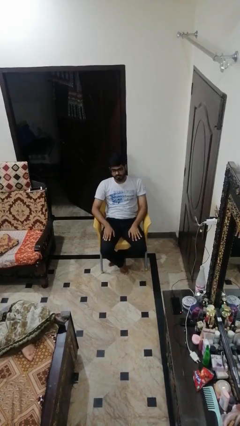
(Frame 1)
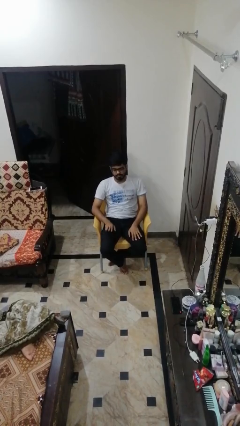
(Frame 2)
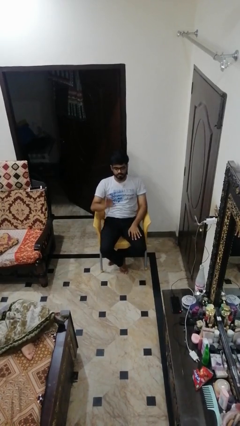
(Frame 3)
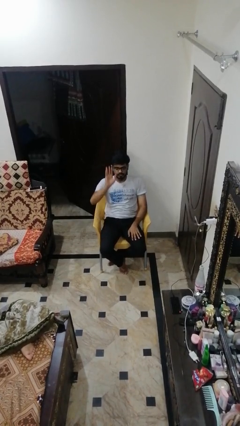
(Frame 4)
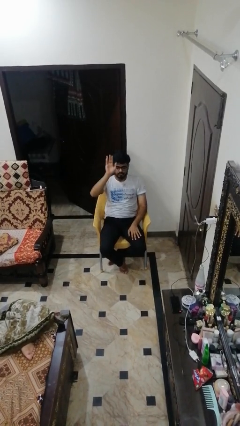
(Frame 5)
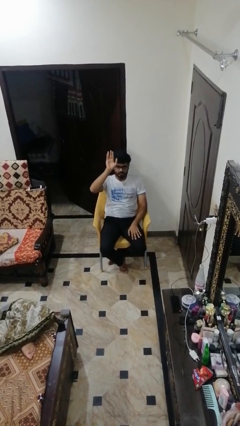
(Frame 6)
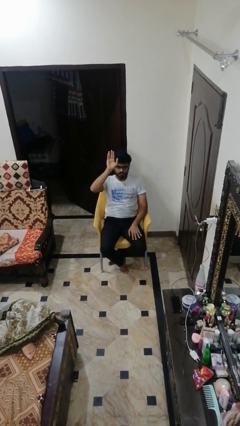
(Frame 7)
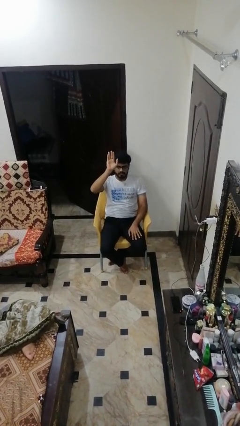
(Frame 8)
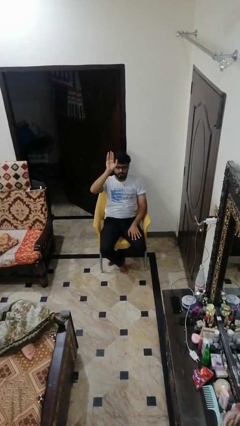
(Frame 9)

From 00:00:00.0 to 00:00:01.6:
person gestures raise hand

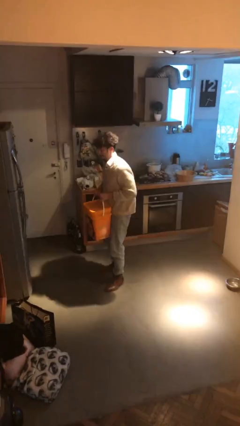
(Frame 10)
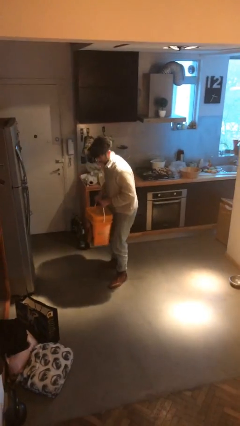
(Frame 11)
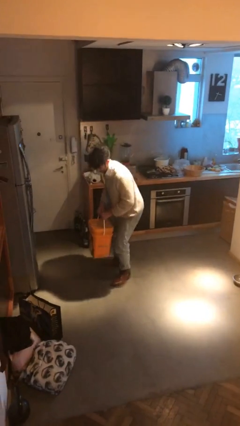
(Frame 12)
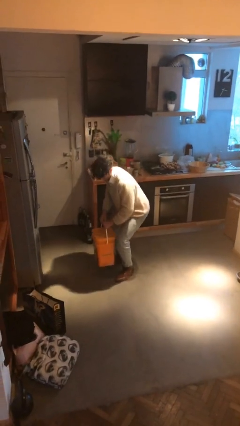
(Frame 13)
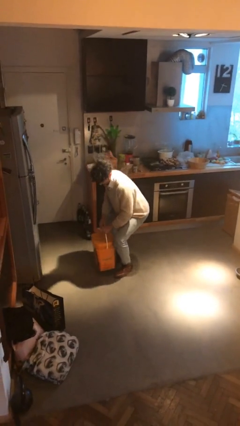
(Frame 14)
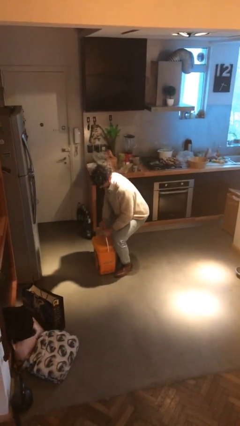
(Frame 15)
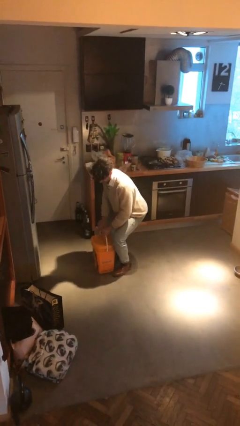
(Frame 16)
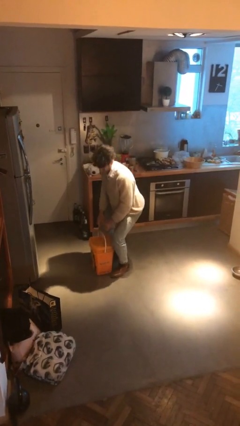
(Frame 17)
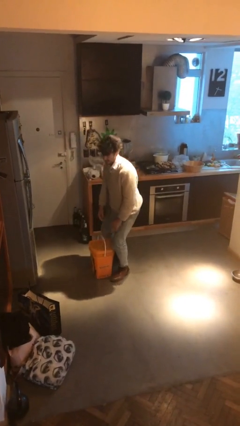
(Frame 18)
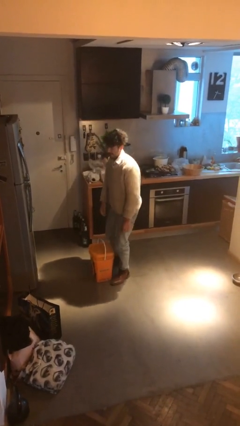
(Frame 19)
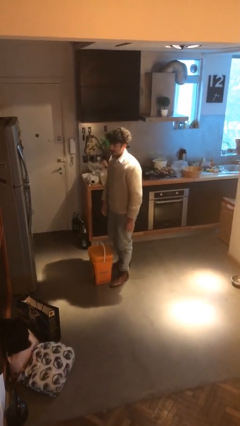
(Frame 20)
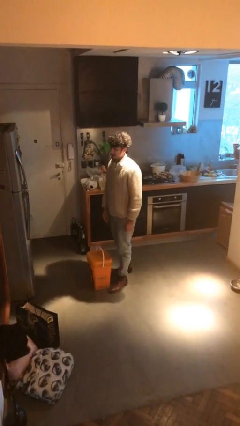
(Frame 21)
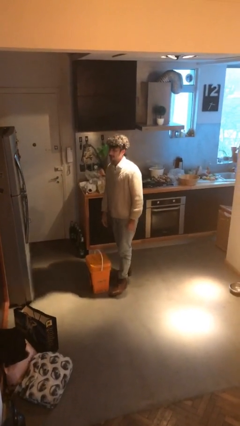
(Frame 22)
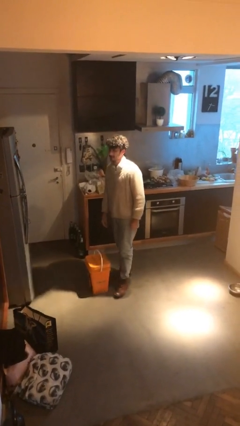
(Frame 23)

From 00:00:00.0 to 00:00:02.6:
person puts down object on floor

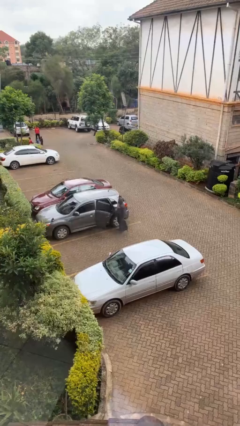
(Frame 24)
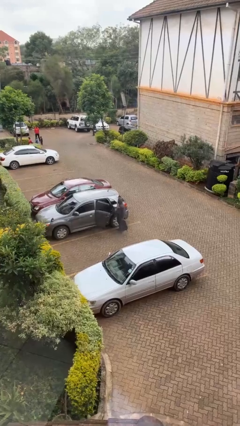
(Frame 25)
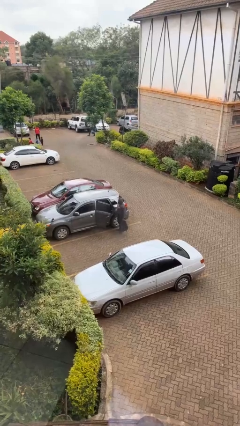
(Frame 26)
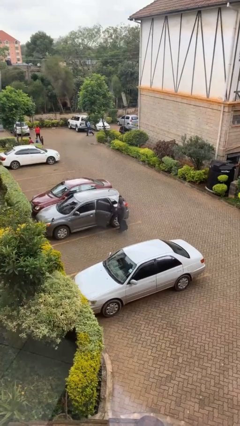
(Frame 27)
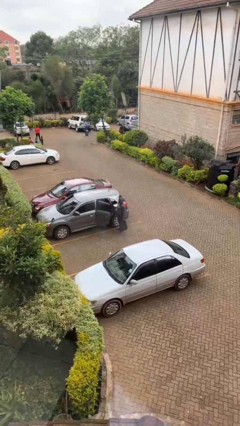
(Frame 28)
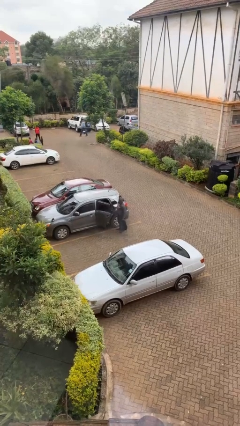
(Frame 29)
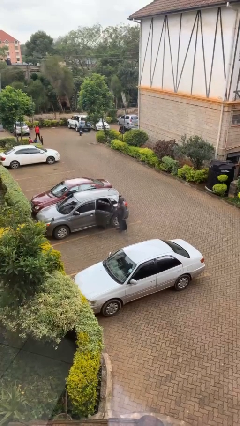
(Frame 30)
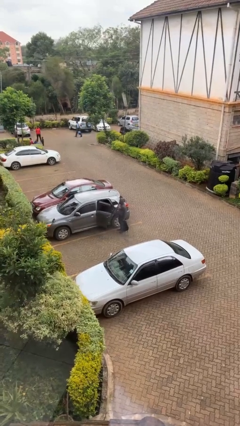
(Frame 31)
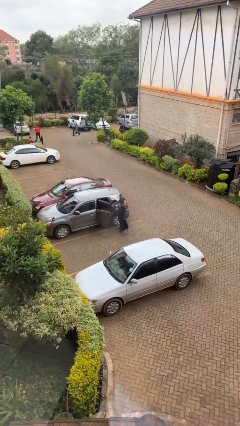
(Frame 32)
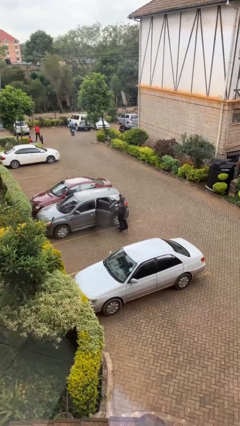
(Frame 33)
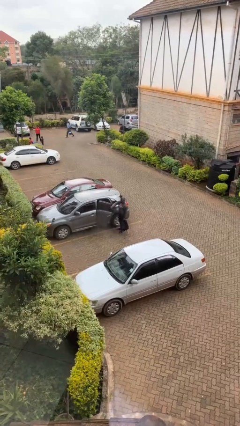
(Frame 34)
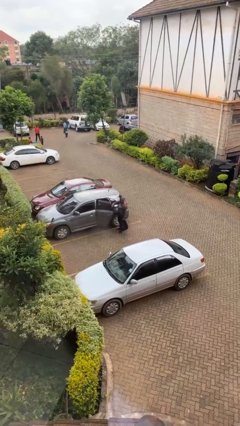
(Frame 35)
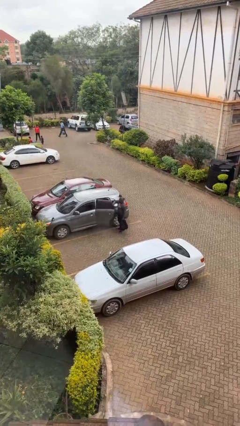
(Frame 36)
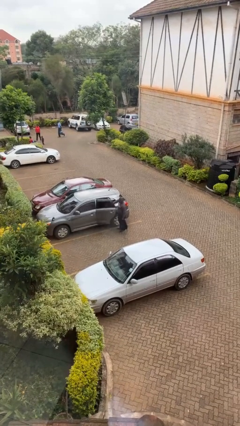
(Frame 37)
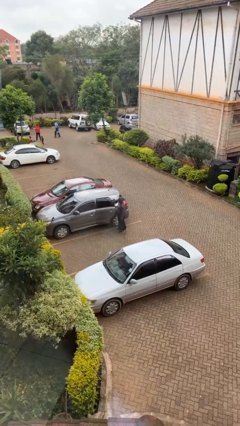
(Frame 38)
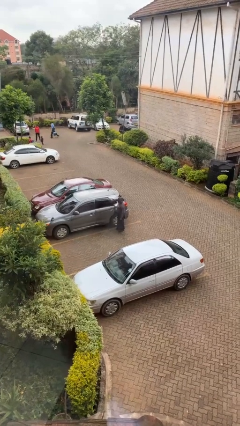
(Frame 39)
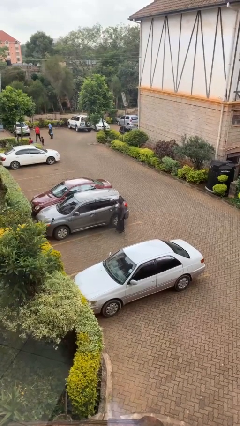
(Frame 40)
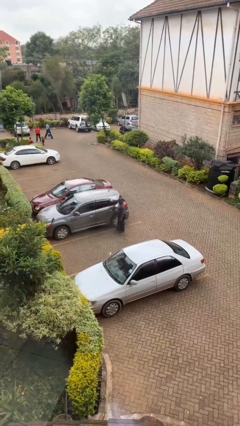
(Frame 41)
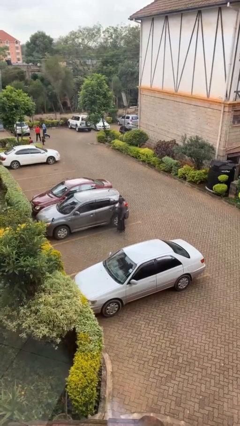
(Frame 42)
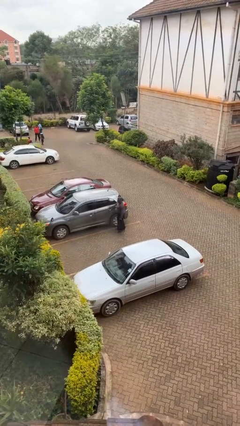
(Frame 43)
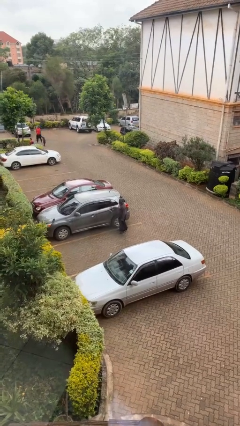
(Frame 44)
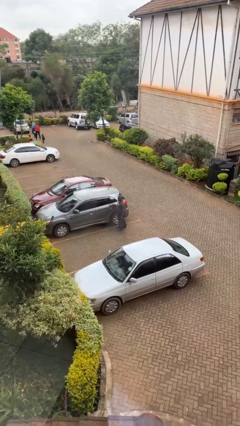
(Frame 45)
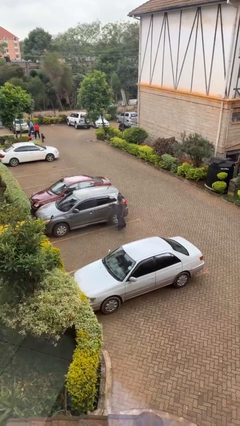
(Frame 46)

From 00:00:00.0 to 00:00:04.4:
person closes car door

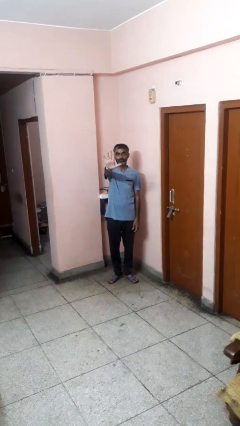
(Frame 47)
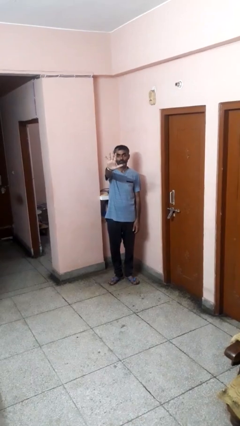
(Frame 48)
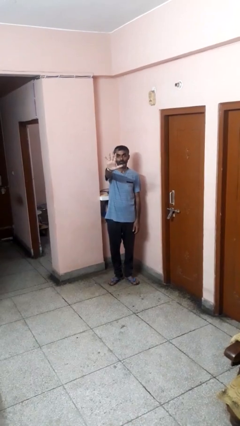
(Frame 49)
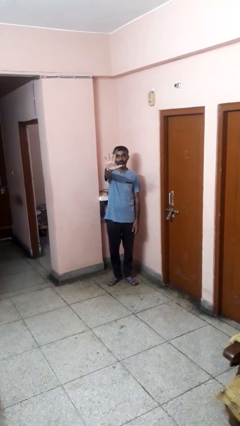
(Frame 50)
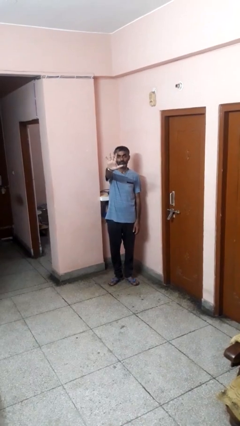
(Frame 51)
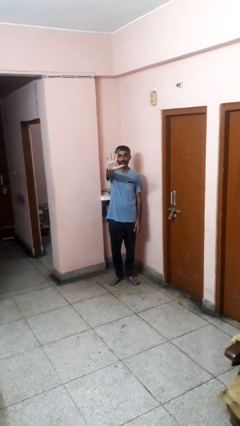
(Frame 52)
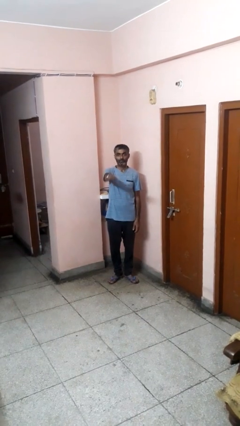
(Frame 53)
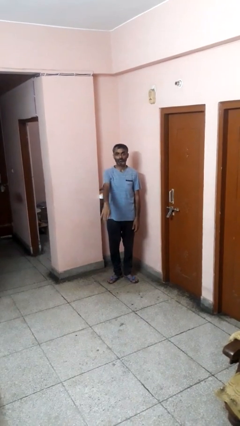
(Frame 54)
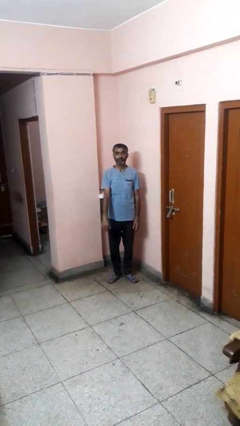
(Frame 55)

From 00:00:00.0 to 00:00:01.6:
person gestures number five

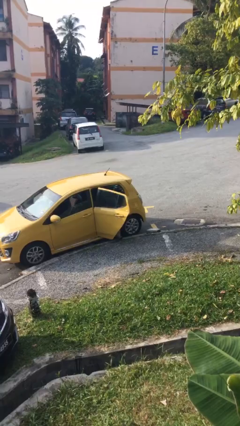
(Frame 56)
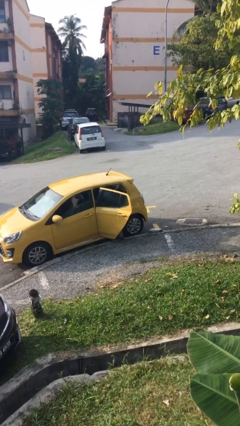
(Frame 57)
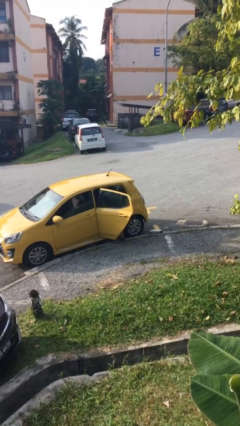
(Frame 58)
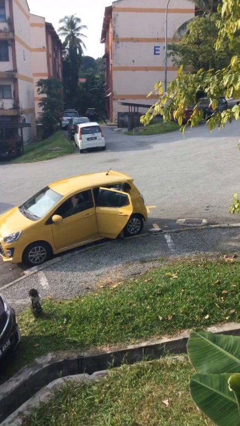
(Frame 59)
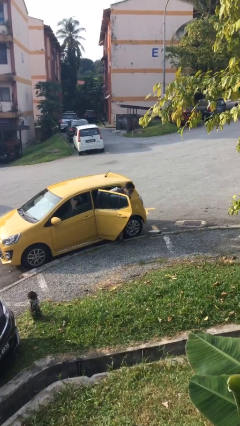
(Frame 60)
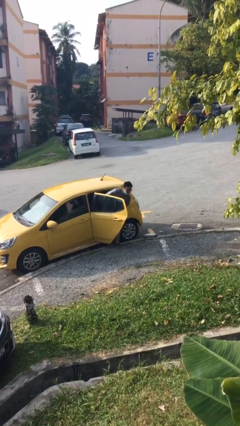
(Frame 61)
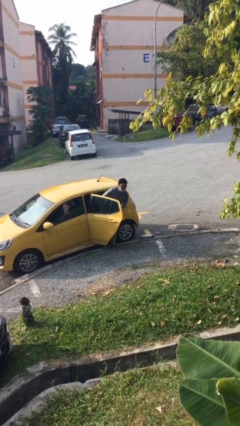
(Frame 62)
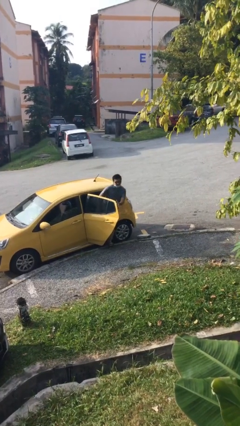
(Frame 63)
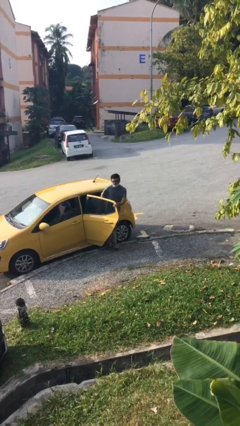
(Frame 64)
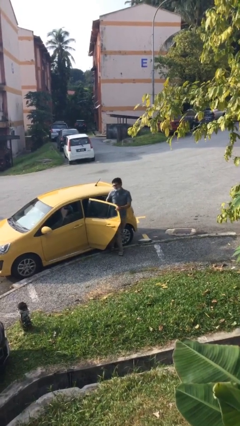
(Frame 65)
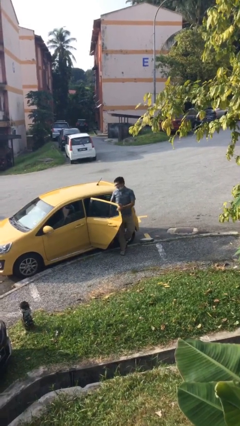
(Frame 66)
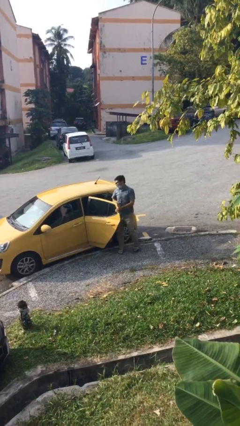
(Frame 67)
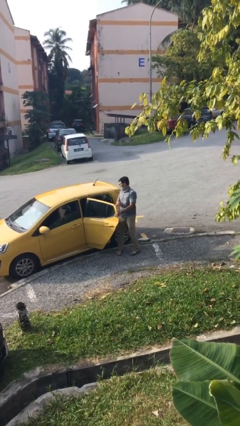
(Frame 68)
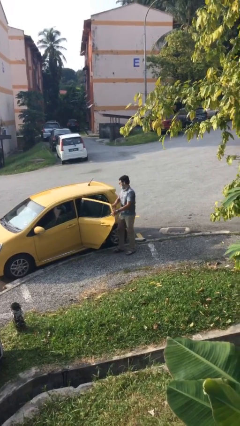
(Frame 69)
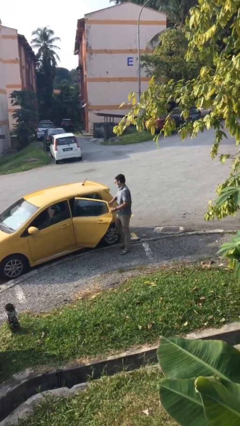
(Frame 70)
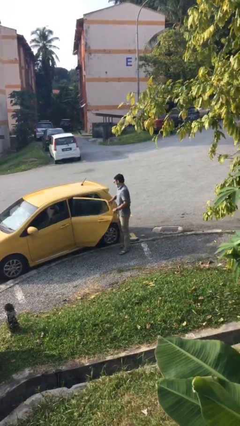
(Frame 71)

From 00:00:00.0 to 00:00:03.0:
person exits car

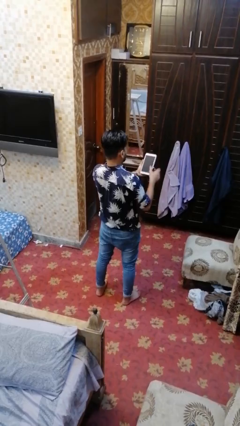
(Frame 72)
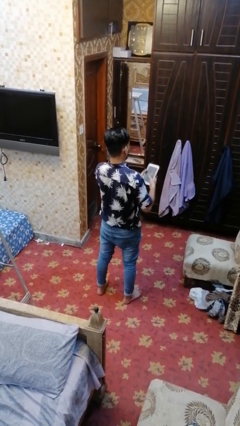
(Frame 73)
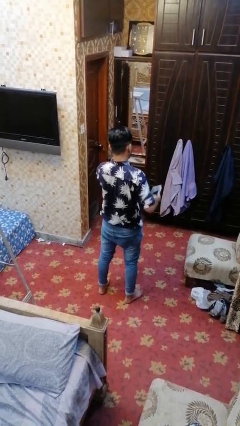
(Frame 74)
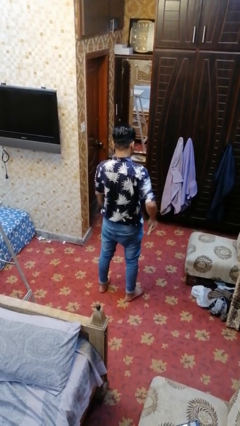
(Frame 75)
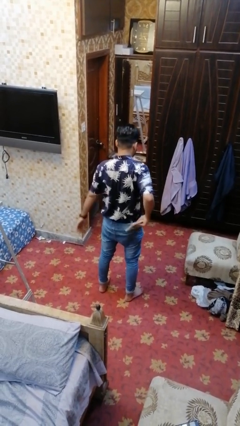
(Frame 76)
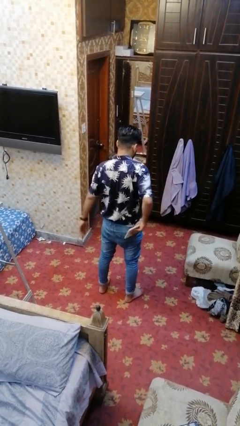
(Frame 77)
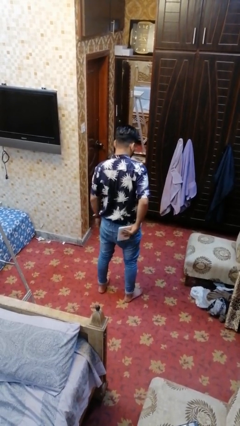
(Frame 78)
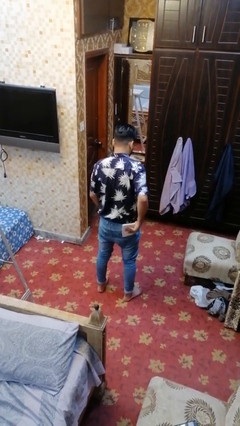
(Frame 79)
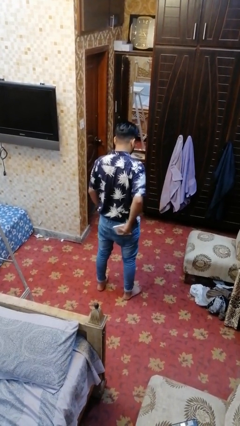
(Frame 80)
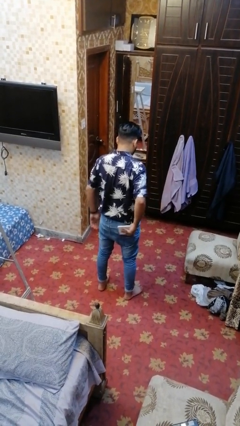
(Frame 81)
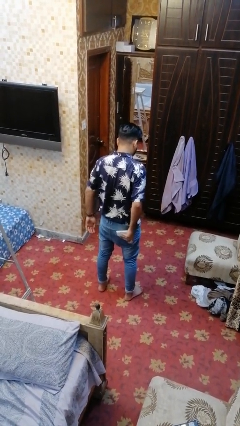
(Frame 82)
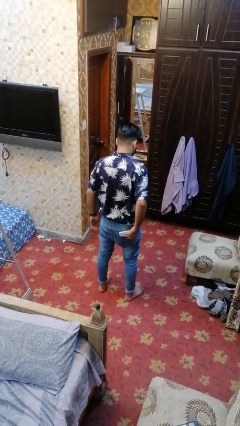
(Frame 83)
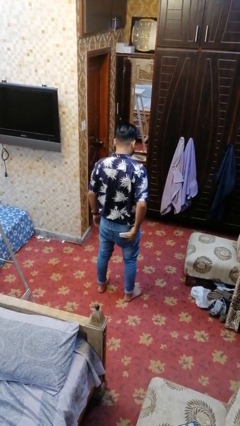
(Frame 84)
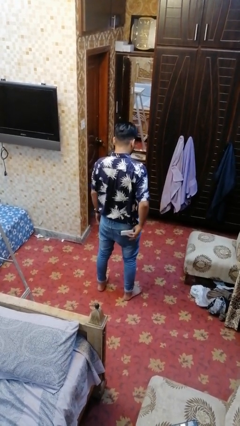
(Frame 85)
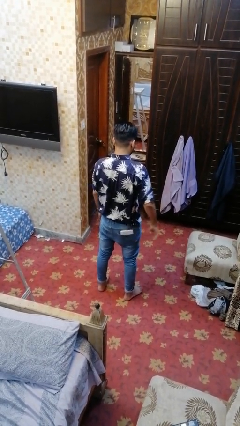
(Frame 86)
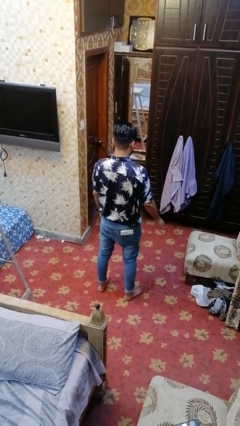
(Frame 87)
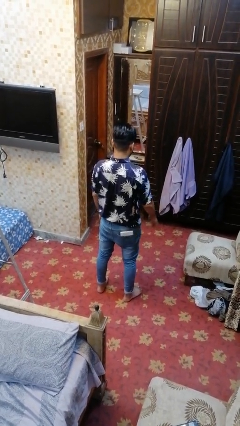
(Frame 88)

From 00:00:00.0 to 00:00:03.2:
person puts phone into pocket

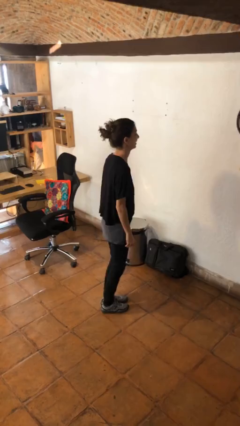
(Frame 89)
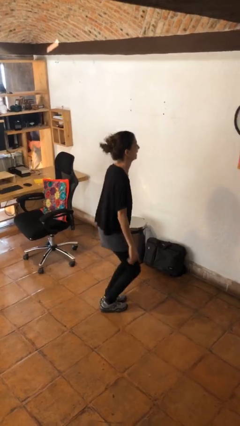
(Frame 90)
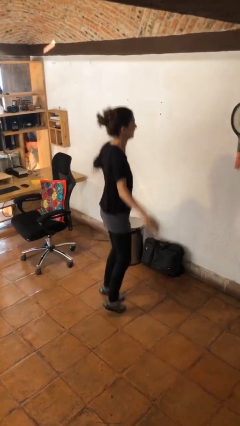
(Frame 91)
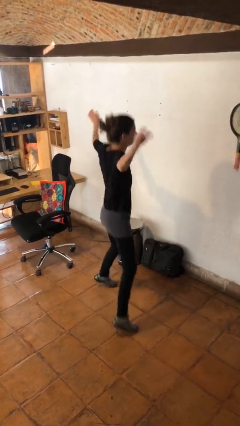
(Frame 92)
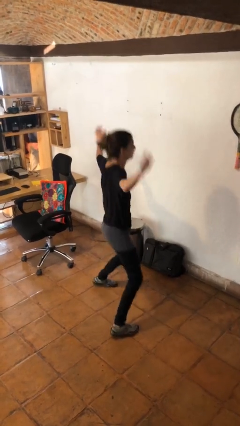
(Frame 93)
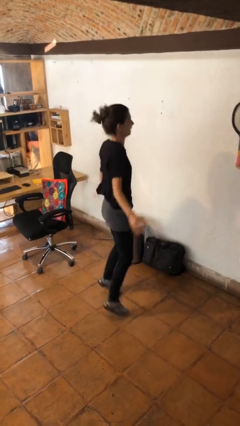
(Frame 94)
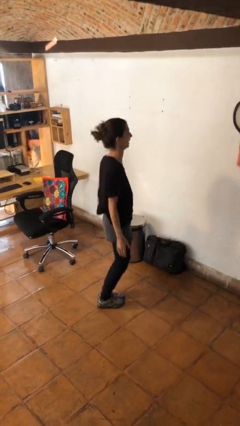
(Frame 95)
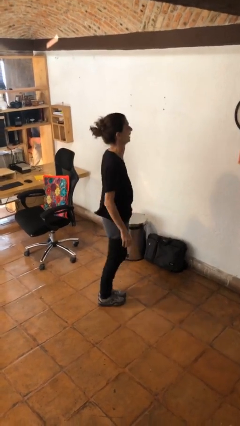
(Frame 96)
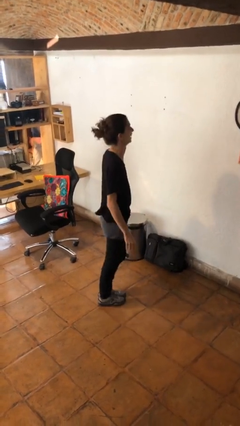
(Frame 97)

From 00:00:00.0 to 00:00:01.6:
person exercises with jumping jacks
